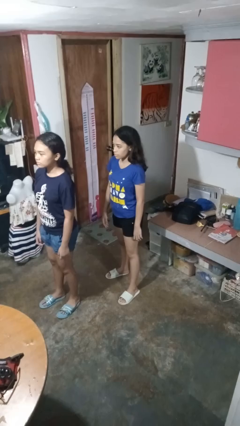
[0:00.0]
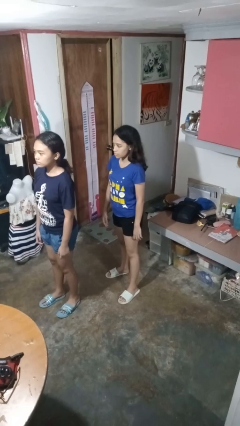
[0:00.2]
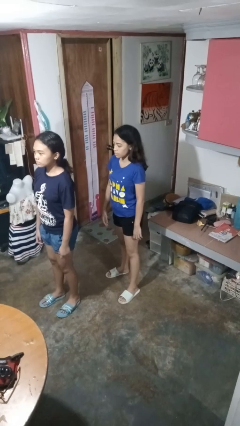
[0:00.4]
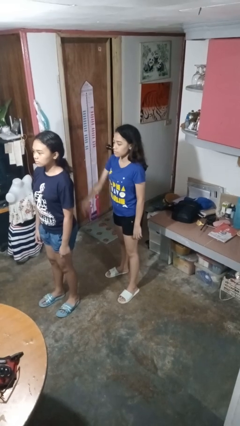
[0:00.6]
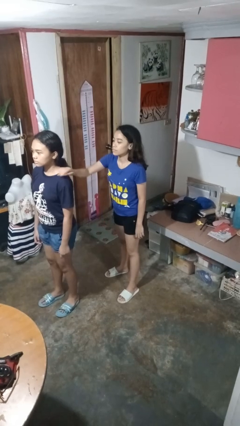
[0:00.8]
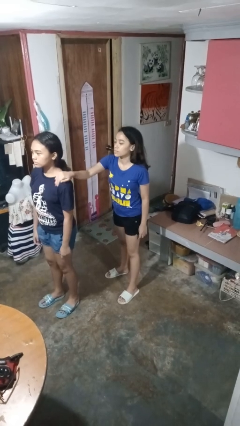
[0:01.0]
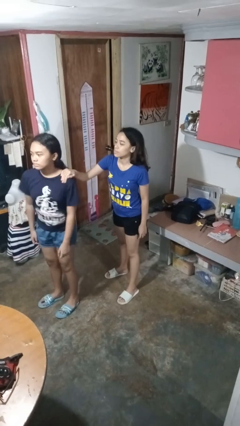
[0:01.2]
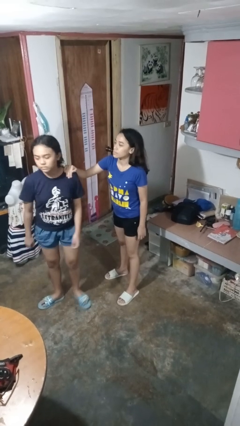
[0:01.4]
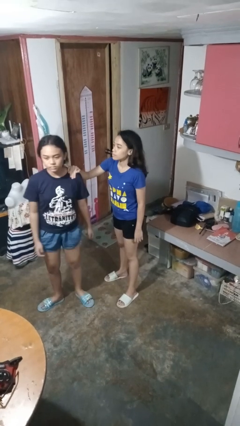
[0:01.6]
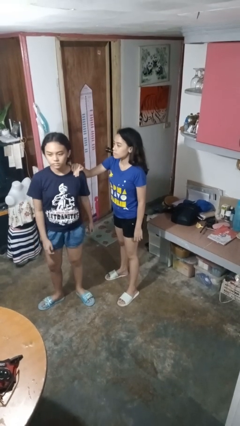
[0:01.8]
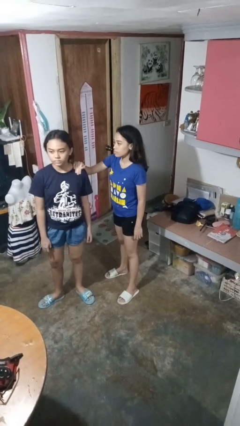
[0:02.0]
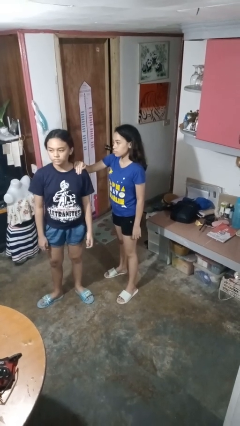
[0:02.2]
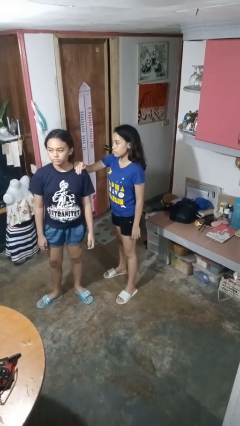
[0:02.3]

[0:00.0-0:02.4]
person grabs person by shoulder

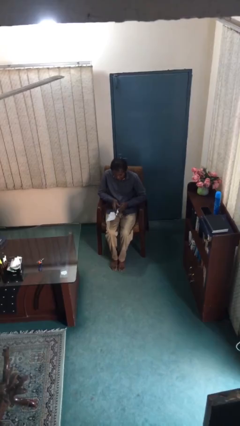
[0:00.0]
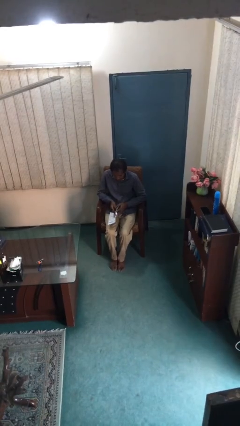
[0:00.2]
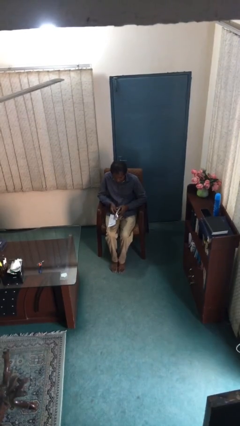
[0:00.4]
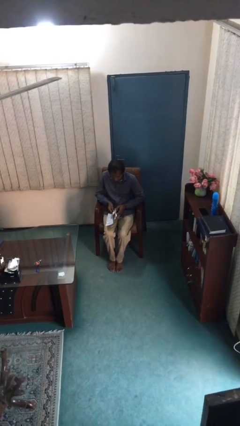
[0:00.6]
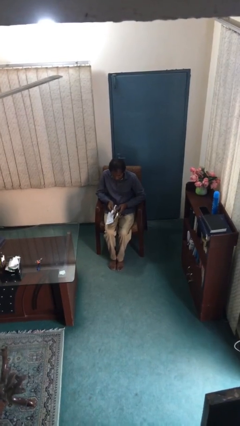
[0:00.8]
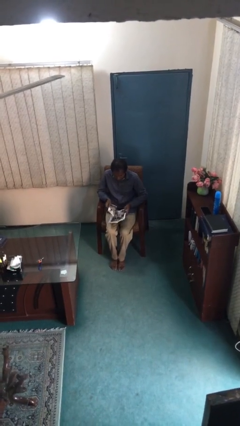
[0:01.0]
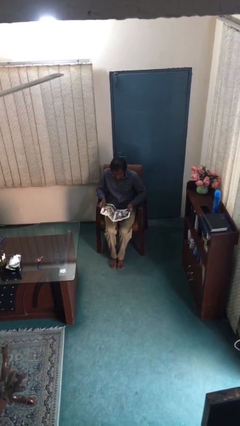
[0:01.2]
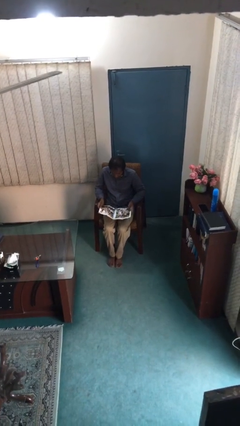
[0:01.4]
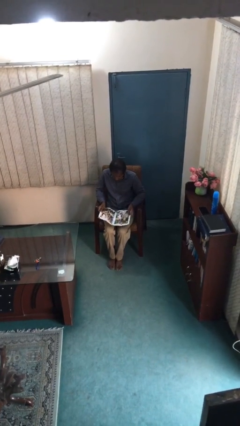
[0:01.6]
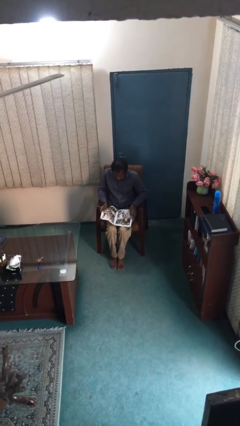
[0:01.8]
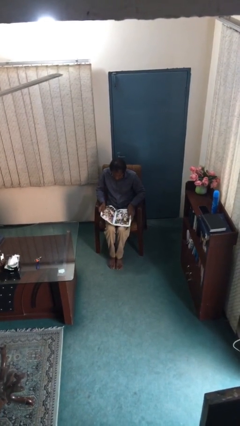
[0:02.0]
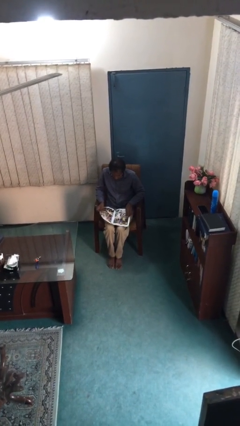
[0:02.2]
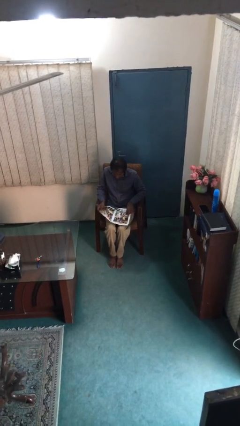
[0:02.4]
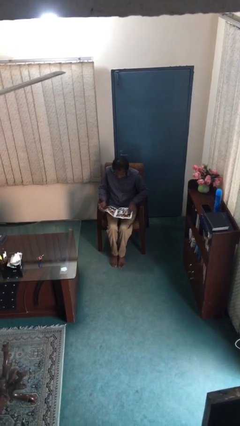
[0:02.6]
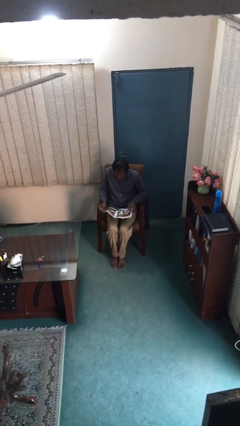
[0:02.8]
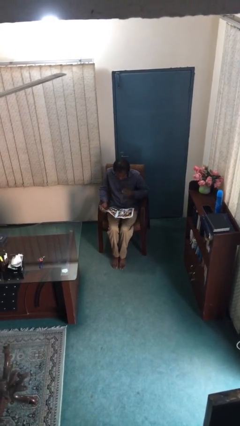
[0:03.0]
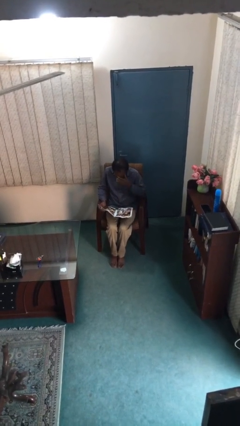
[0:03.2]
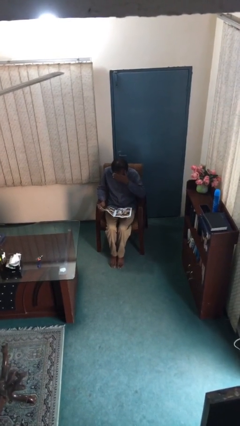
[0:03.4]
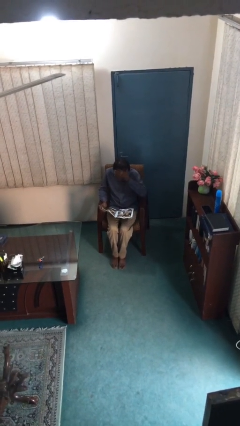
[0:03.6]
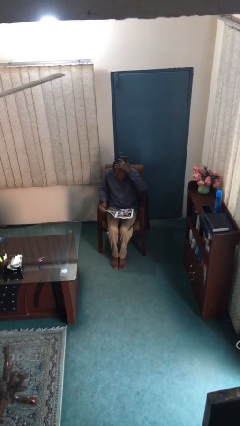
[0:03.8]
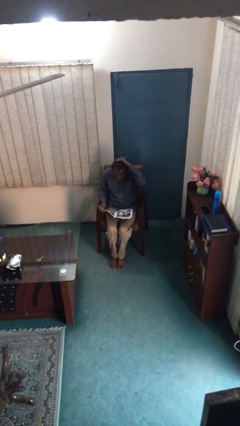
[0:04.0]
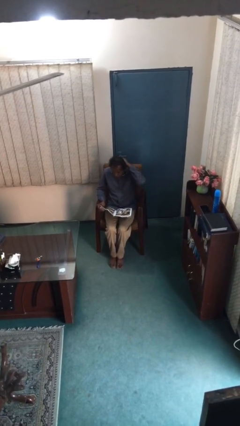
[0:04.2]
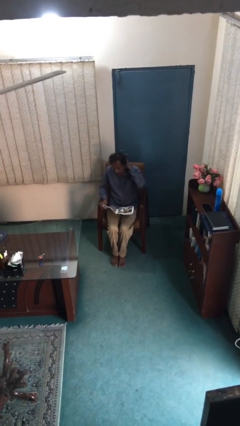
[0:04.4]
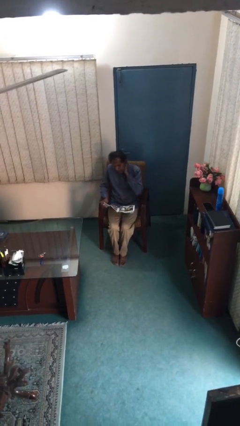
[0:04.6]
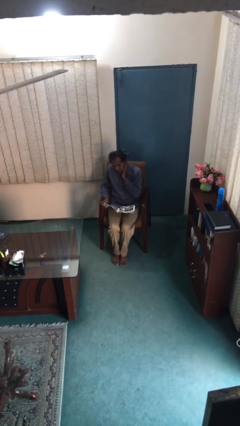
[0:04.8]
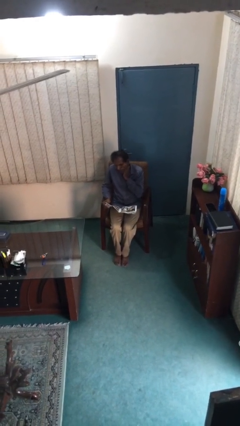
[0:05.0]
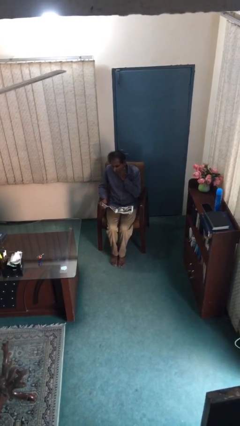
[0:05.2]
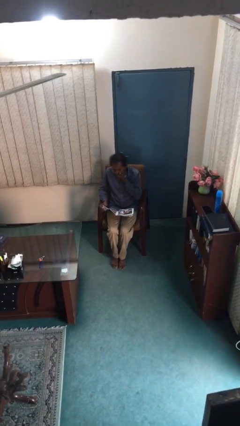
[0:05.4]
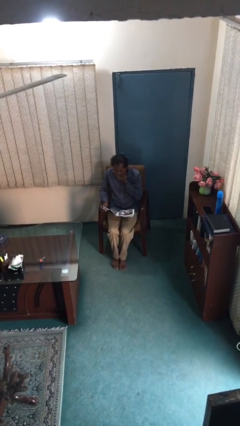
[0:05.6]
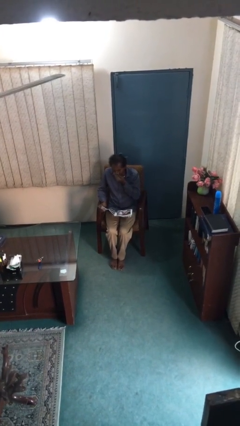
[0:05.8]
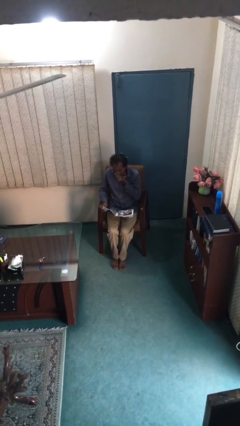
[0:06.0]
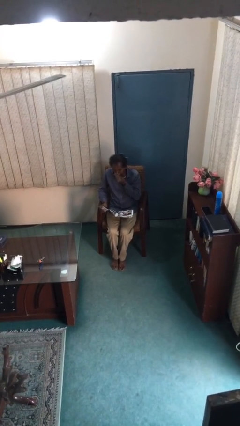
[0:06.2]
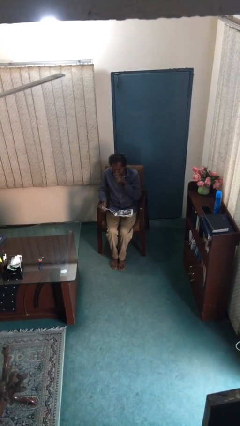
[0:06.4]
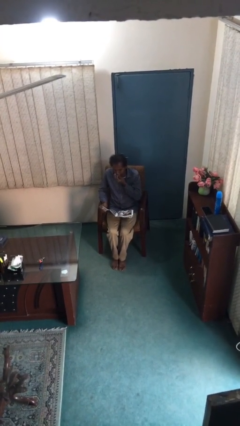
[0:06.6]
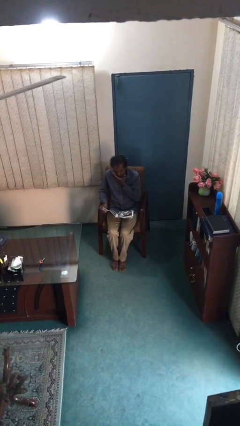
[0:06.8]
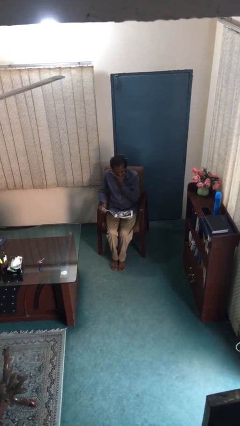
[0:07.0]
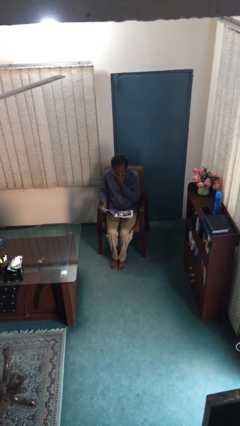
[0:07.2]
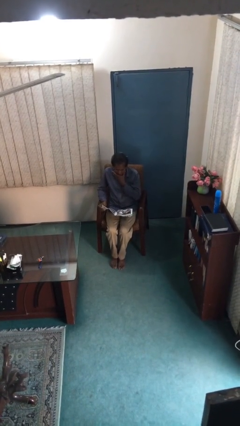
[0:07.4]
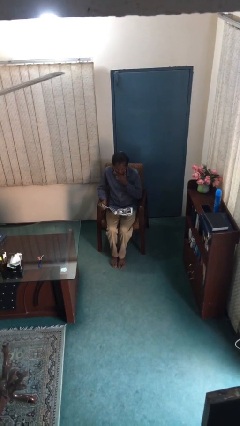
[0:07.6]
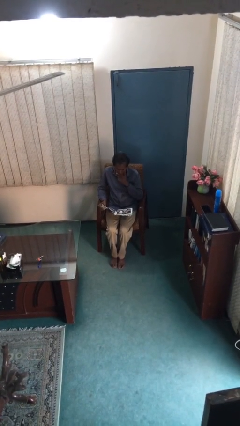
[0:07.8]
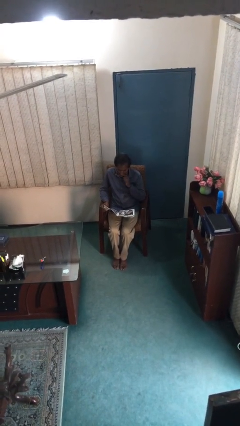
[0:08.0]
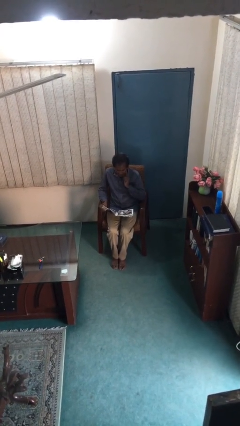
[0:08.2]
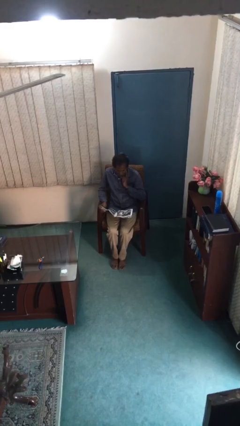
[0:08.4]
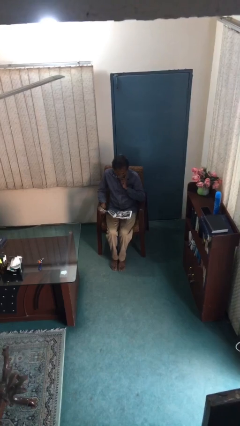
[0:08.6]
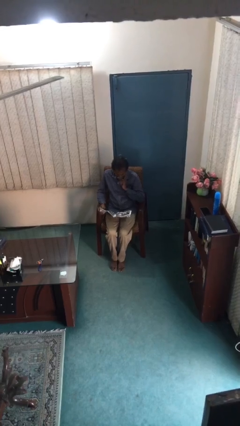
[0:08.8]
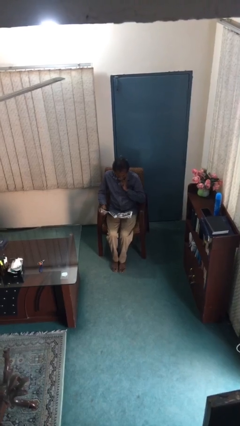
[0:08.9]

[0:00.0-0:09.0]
person reads document

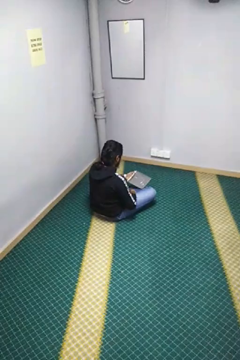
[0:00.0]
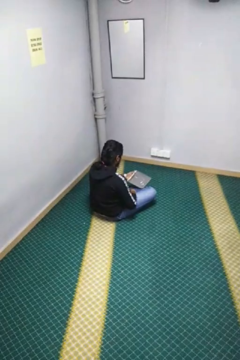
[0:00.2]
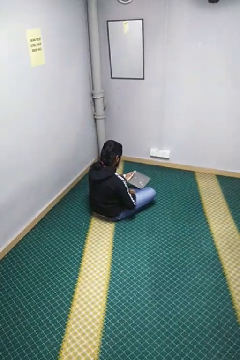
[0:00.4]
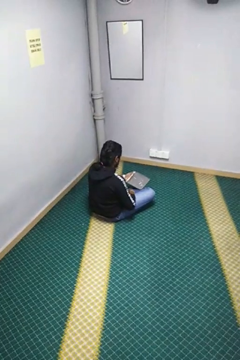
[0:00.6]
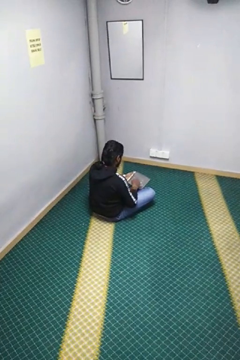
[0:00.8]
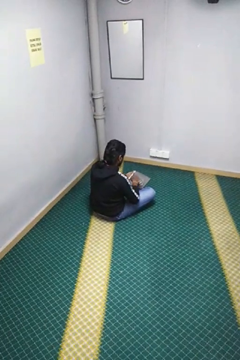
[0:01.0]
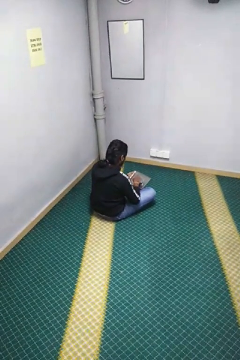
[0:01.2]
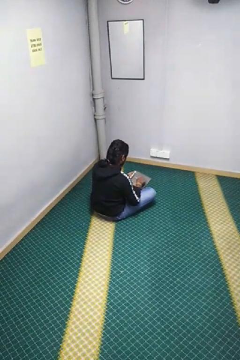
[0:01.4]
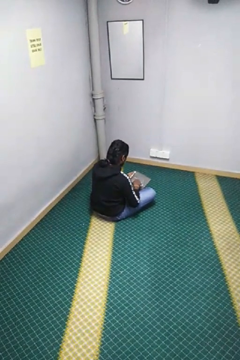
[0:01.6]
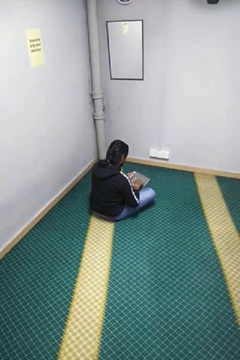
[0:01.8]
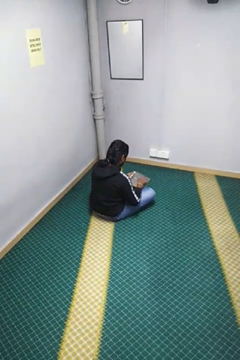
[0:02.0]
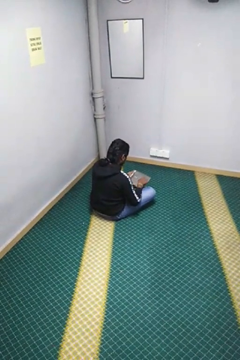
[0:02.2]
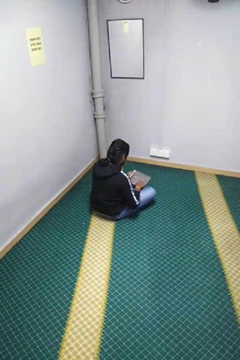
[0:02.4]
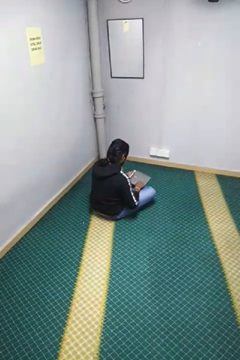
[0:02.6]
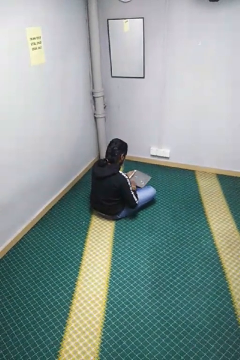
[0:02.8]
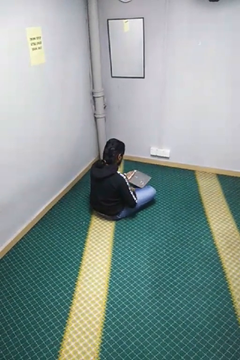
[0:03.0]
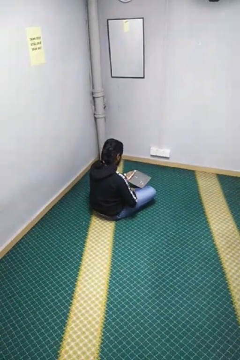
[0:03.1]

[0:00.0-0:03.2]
person interacts with tablet

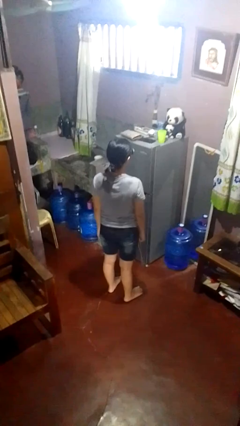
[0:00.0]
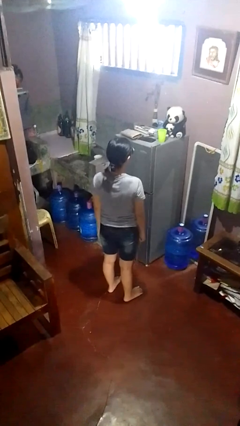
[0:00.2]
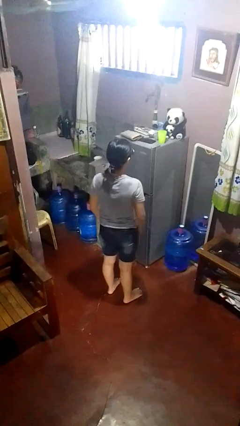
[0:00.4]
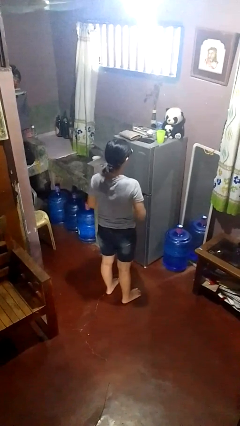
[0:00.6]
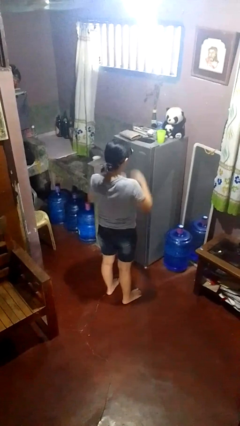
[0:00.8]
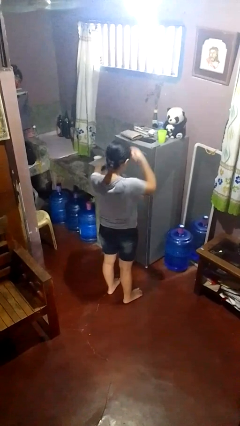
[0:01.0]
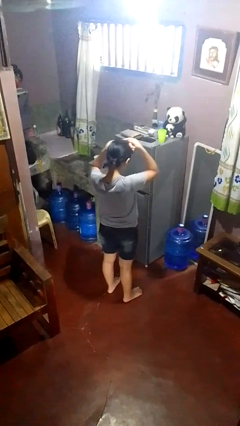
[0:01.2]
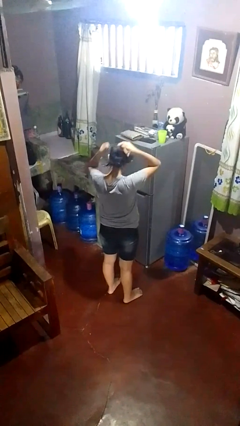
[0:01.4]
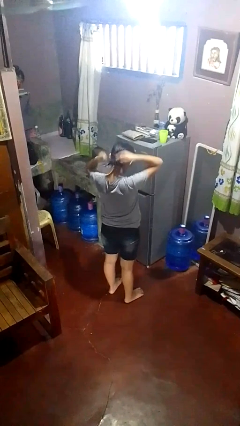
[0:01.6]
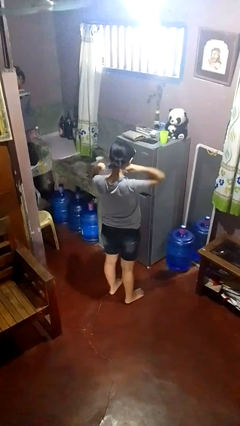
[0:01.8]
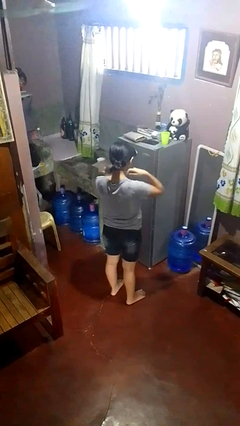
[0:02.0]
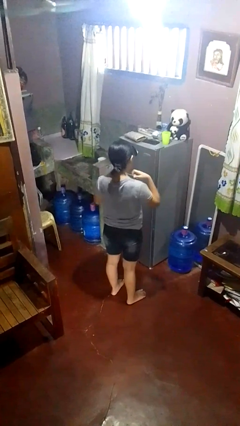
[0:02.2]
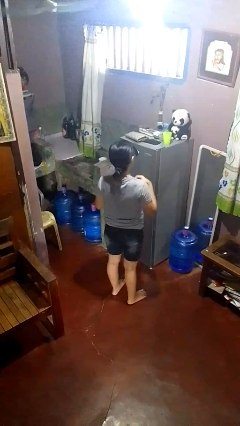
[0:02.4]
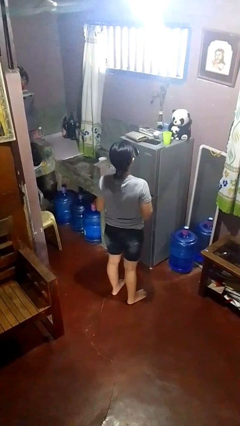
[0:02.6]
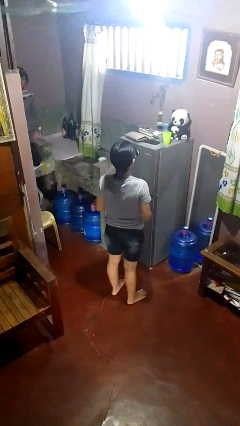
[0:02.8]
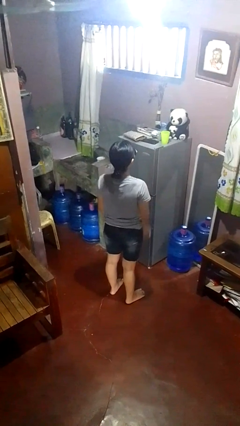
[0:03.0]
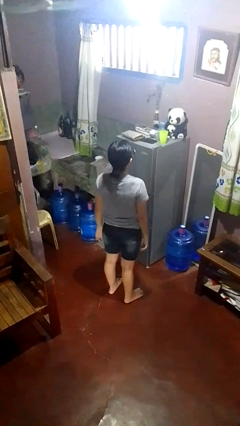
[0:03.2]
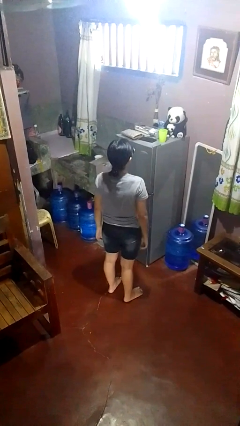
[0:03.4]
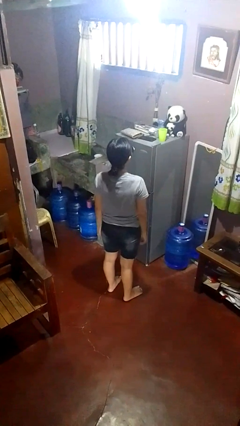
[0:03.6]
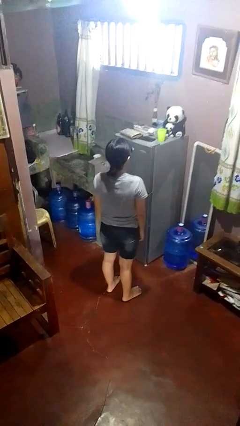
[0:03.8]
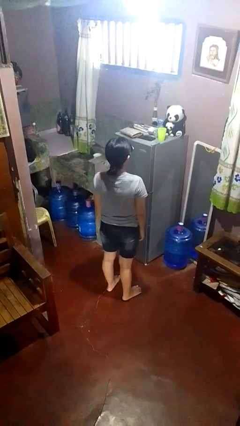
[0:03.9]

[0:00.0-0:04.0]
person puts on necklace
